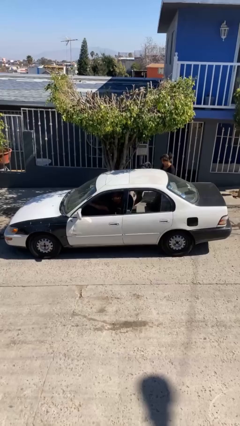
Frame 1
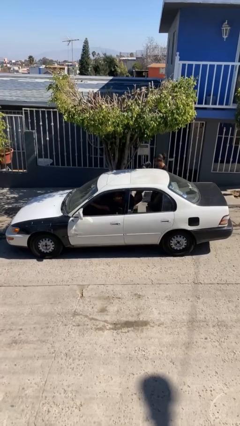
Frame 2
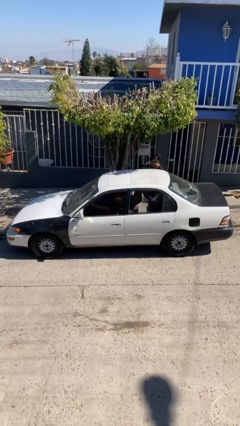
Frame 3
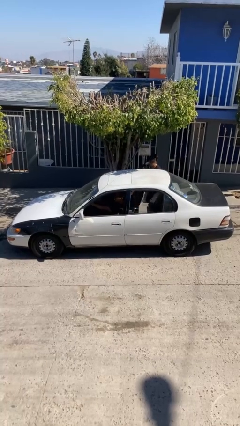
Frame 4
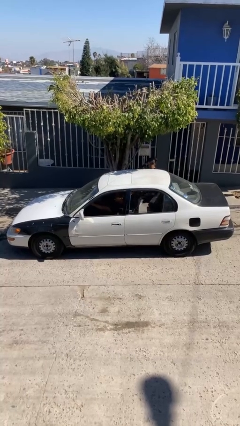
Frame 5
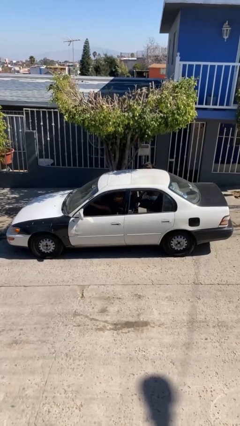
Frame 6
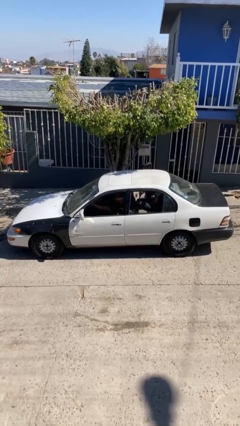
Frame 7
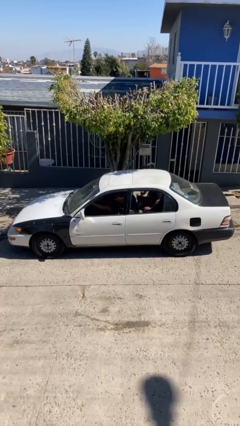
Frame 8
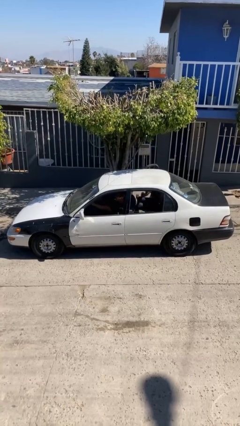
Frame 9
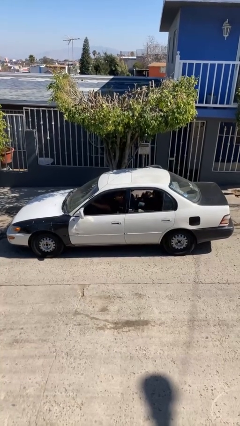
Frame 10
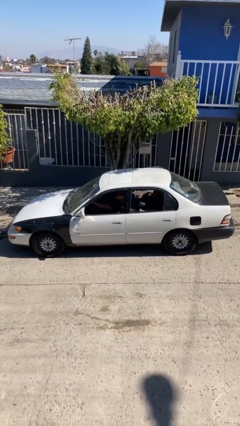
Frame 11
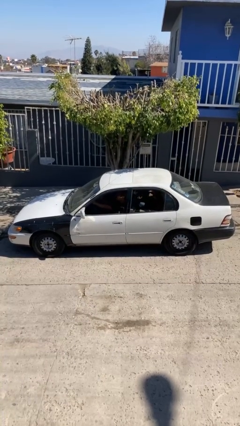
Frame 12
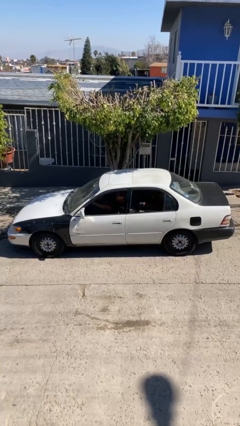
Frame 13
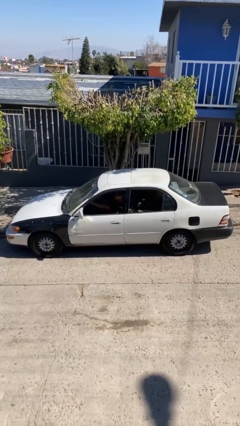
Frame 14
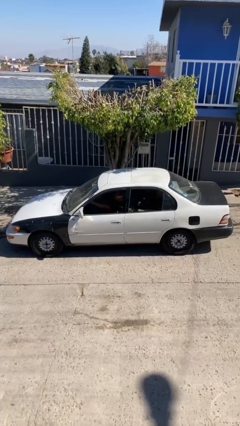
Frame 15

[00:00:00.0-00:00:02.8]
car picks up person

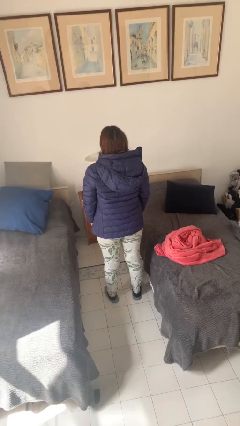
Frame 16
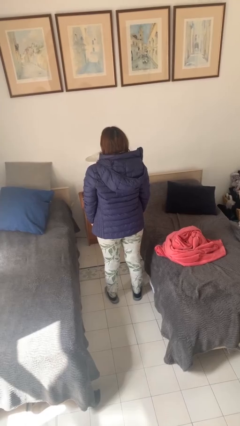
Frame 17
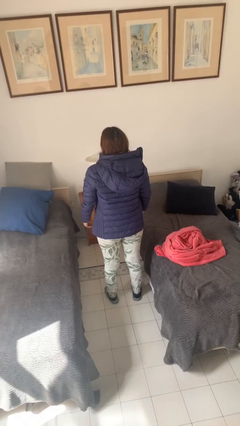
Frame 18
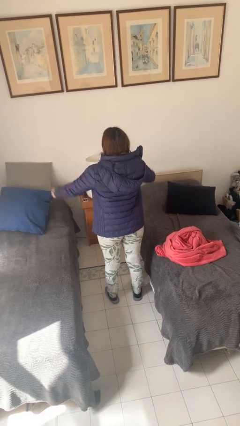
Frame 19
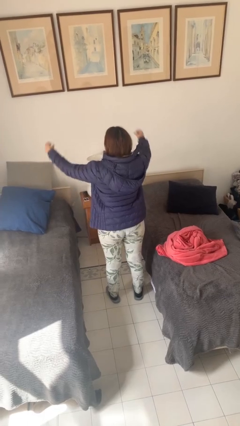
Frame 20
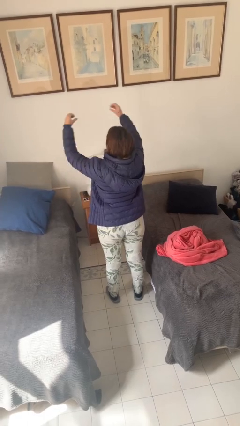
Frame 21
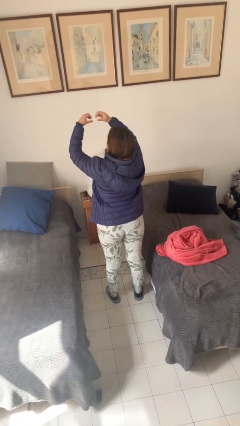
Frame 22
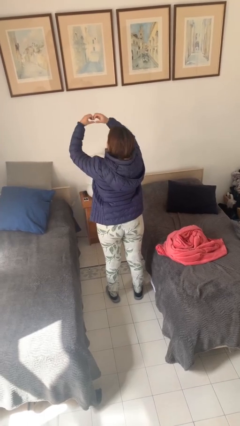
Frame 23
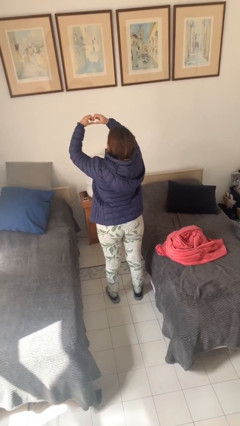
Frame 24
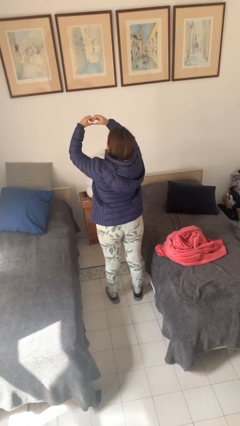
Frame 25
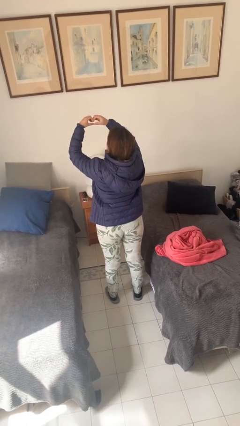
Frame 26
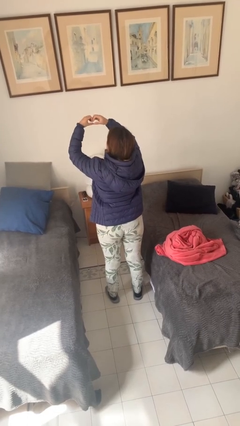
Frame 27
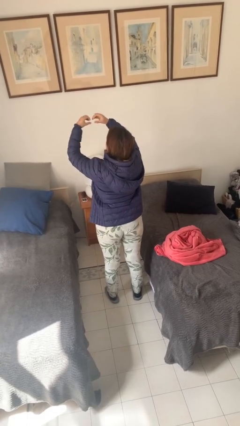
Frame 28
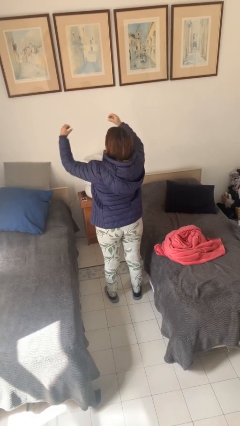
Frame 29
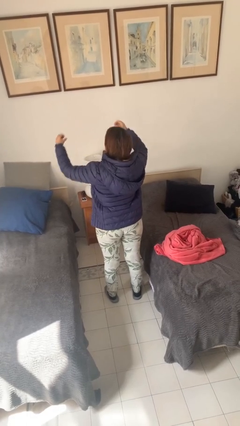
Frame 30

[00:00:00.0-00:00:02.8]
person gestures heart

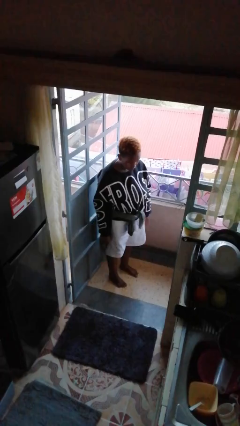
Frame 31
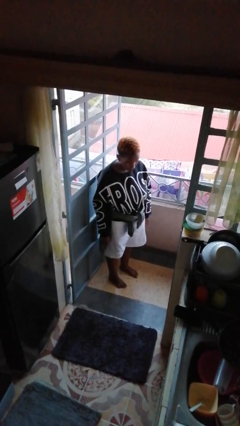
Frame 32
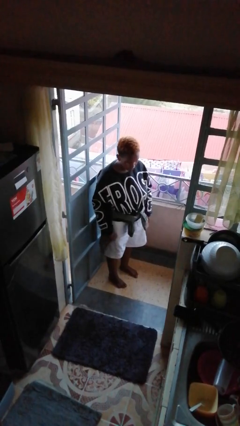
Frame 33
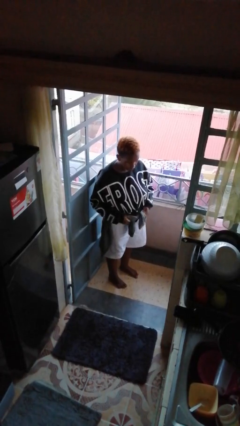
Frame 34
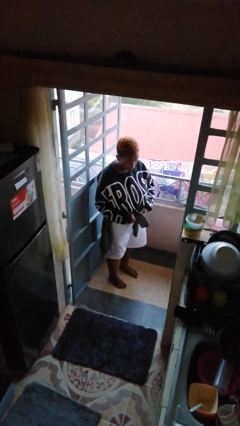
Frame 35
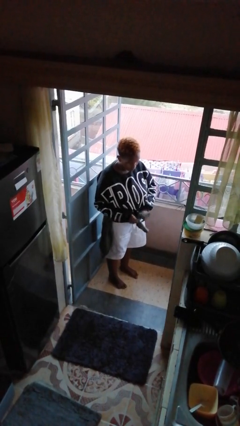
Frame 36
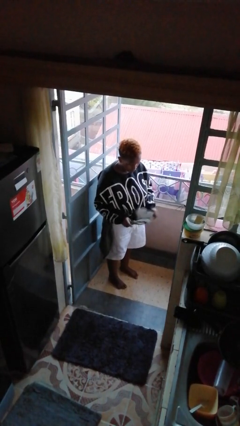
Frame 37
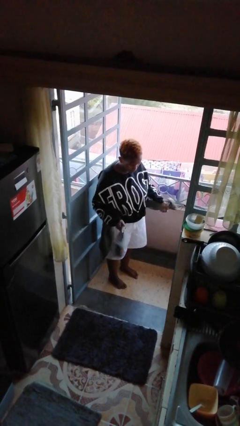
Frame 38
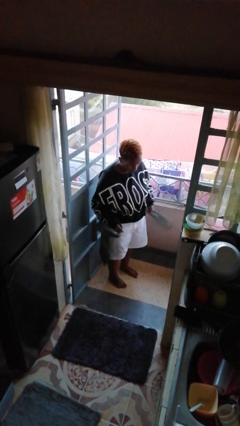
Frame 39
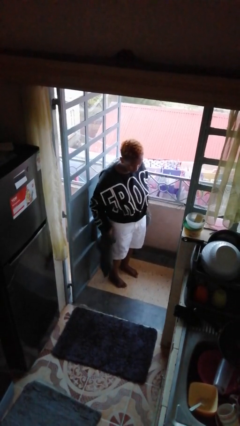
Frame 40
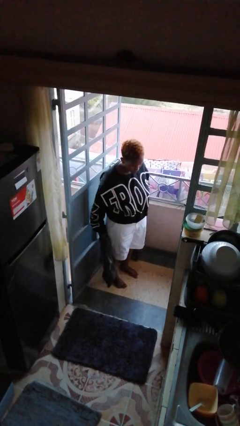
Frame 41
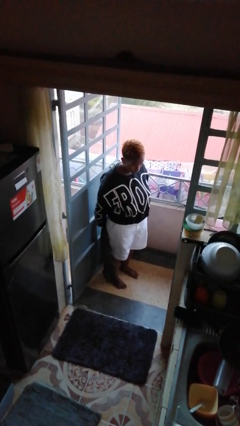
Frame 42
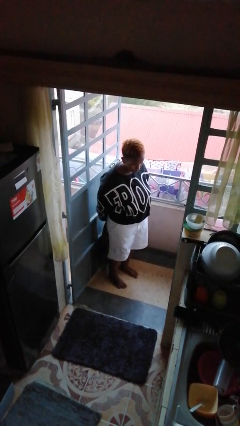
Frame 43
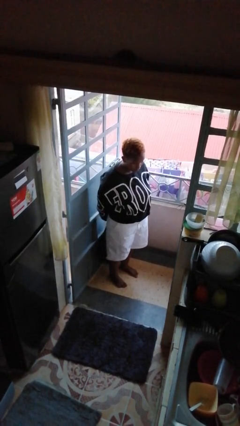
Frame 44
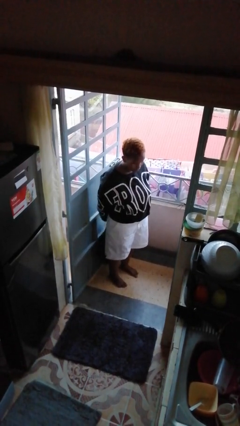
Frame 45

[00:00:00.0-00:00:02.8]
person unties jacket around waist

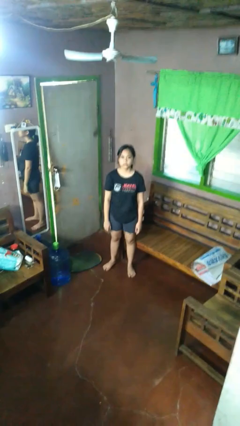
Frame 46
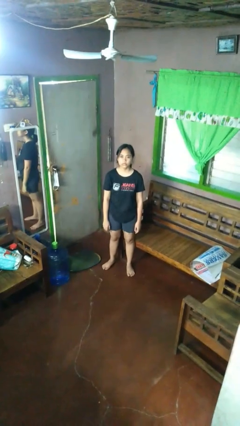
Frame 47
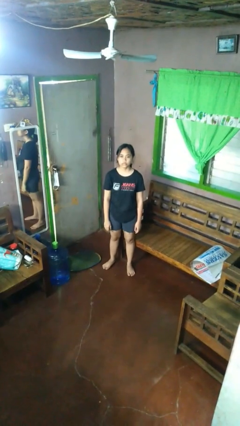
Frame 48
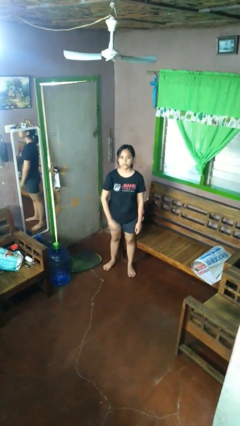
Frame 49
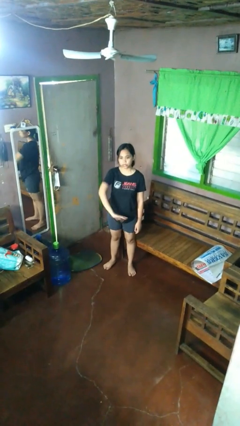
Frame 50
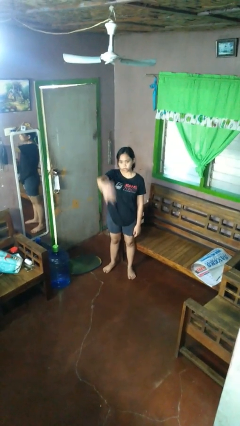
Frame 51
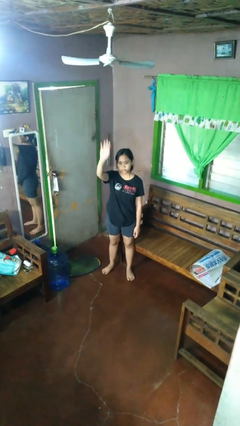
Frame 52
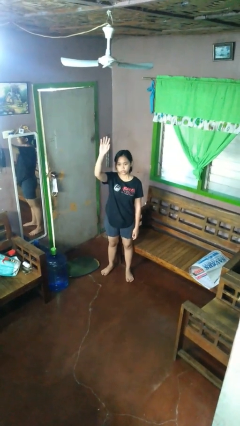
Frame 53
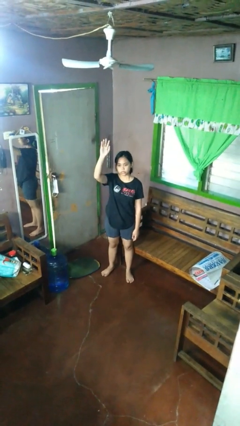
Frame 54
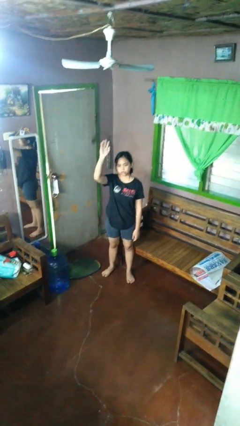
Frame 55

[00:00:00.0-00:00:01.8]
person gestures swipe up

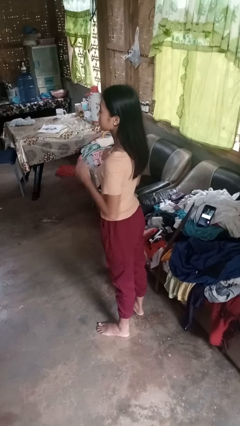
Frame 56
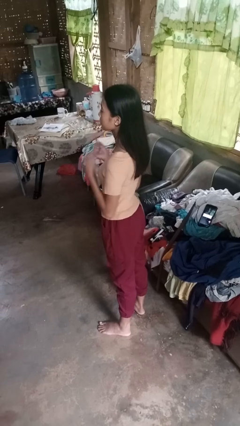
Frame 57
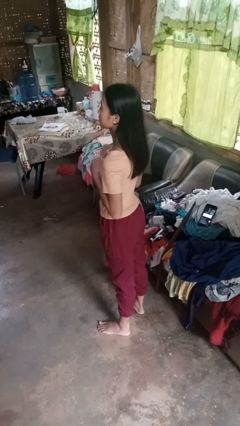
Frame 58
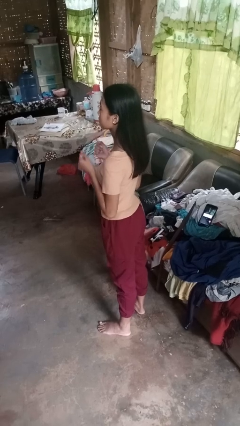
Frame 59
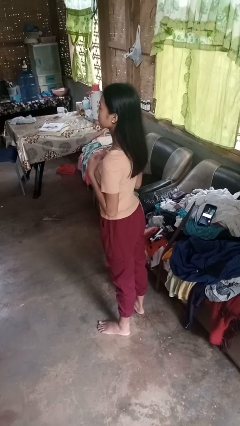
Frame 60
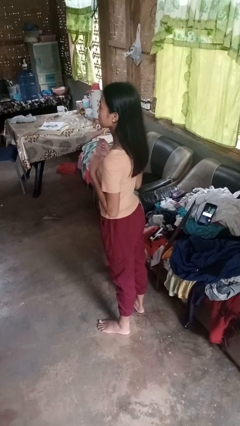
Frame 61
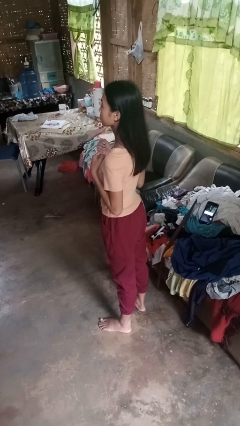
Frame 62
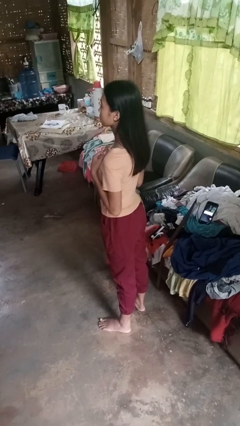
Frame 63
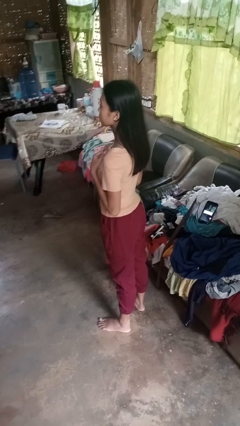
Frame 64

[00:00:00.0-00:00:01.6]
person drums on chest

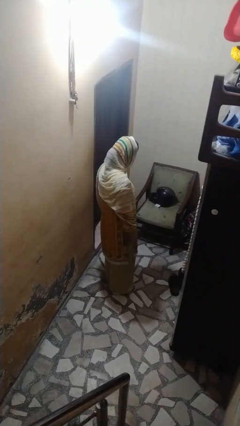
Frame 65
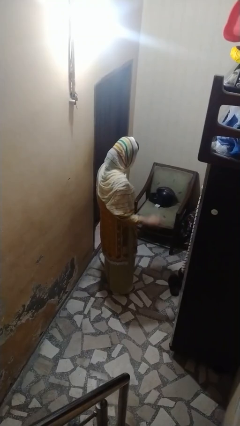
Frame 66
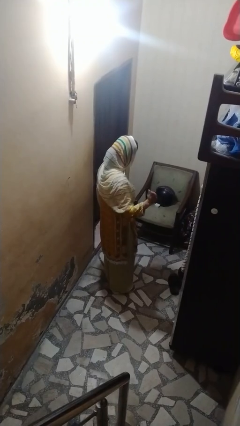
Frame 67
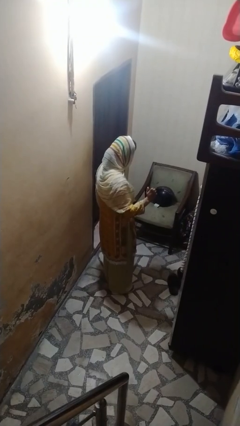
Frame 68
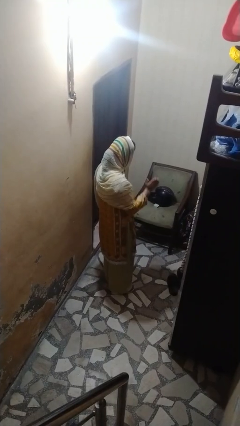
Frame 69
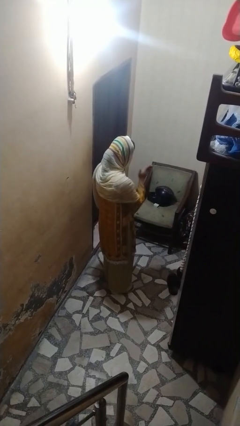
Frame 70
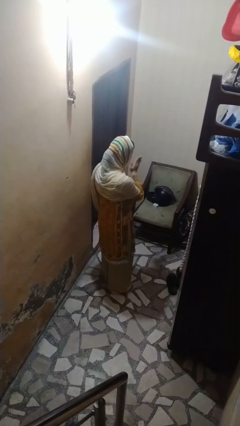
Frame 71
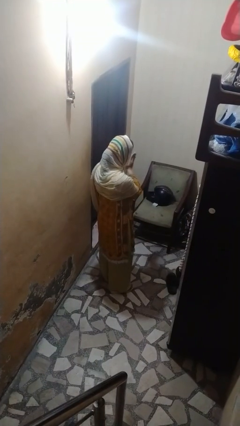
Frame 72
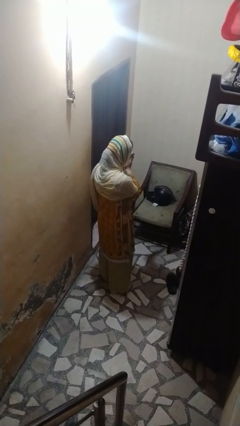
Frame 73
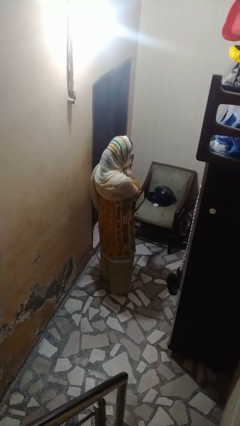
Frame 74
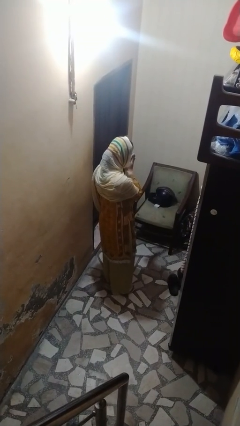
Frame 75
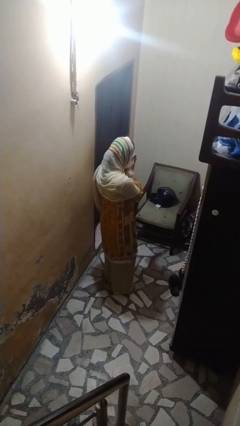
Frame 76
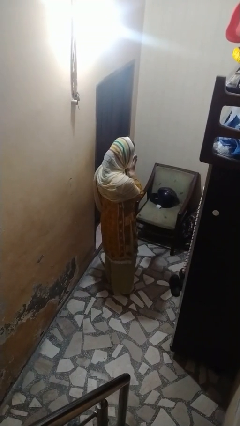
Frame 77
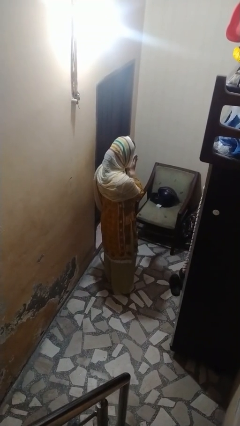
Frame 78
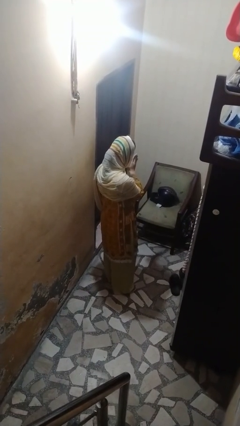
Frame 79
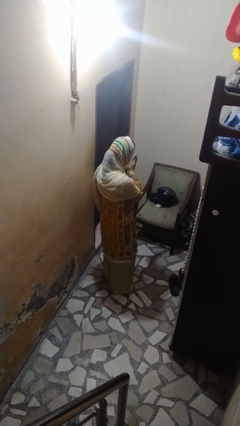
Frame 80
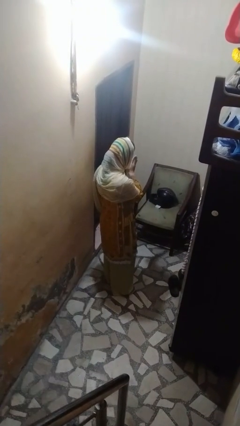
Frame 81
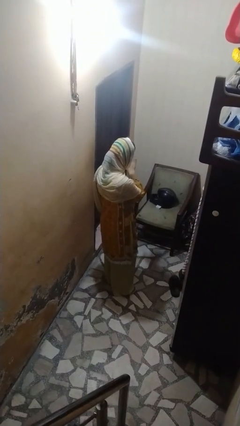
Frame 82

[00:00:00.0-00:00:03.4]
person gestures swipe left

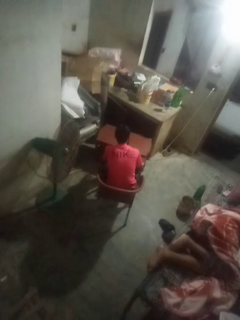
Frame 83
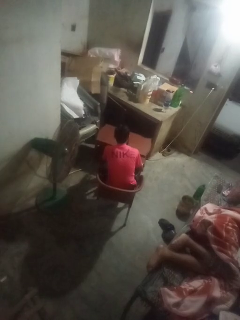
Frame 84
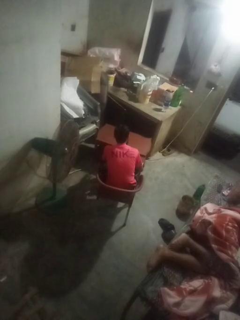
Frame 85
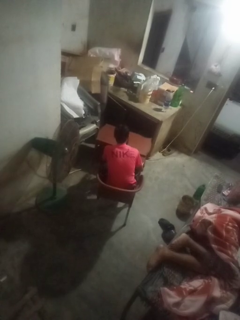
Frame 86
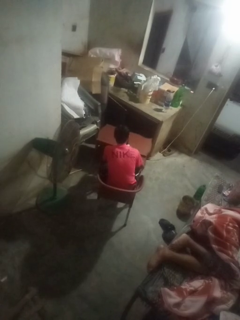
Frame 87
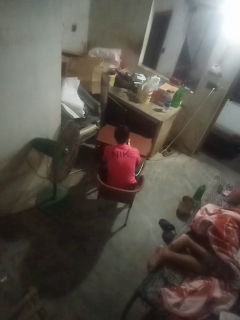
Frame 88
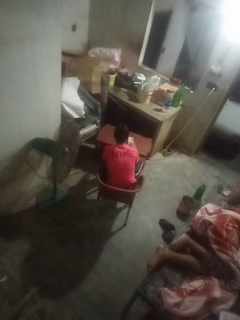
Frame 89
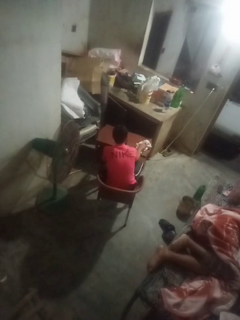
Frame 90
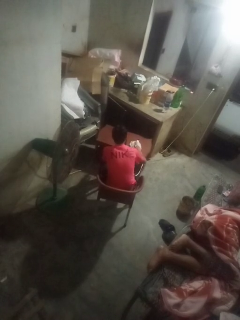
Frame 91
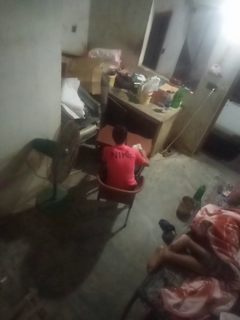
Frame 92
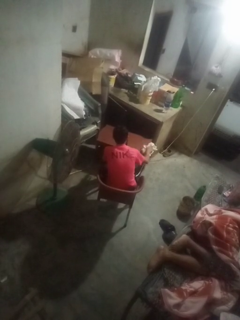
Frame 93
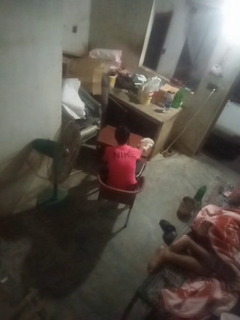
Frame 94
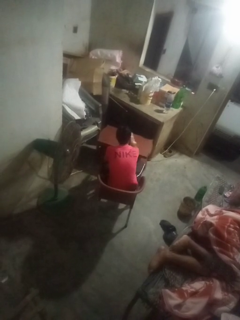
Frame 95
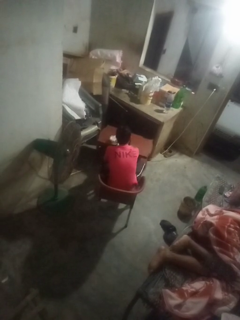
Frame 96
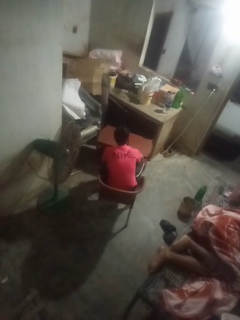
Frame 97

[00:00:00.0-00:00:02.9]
person cleans table with rag
